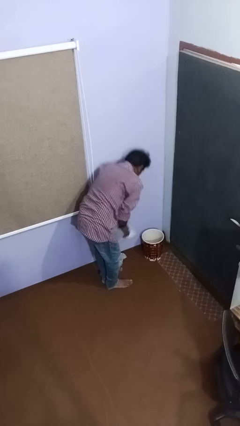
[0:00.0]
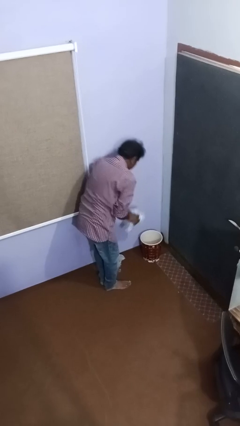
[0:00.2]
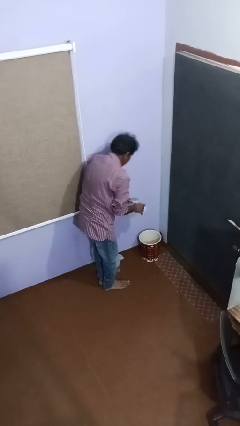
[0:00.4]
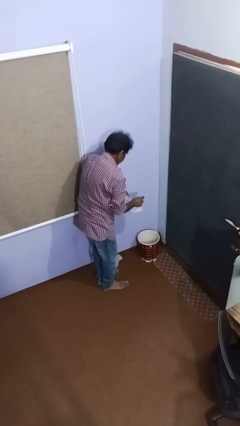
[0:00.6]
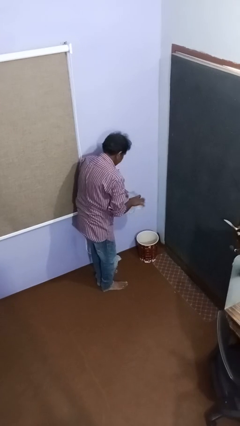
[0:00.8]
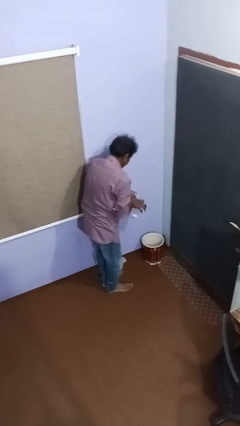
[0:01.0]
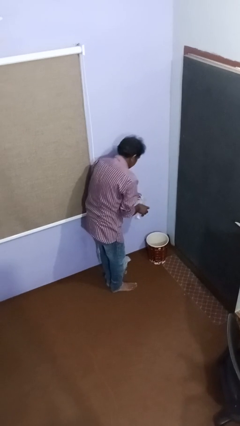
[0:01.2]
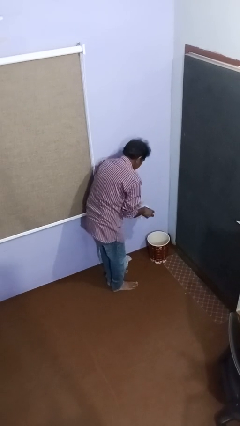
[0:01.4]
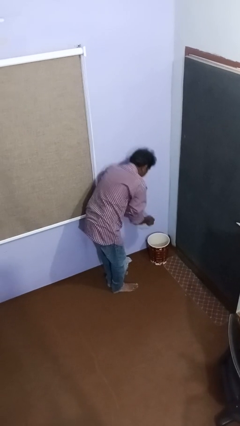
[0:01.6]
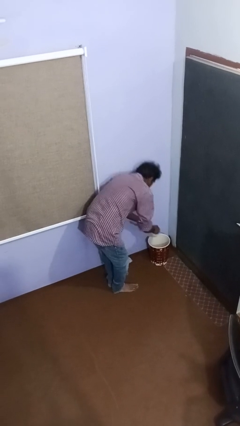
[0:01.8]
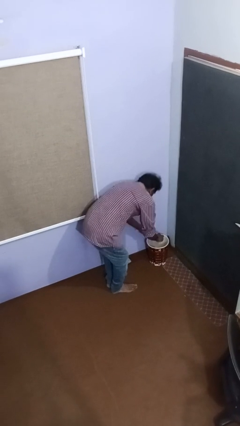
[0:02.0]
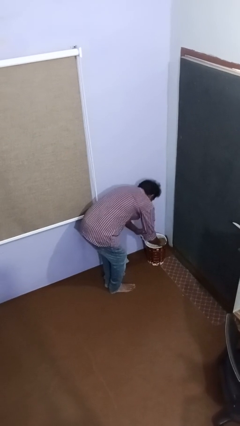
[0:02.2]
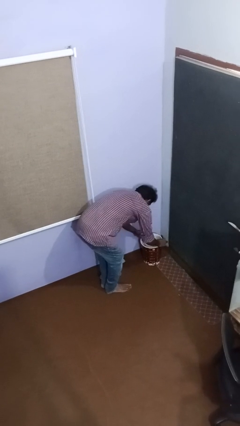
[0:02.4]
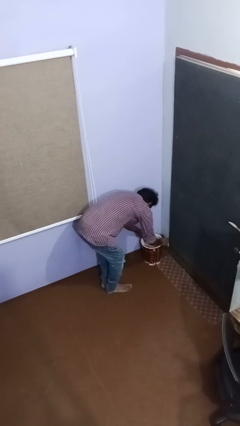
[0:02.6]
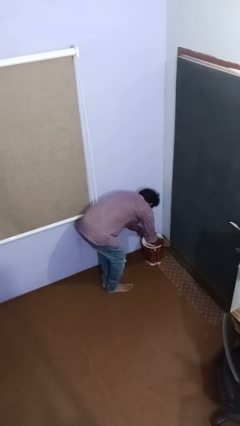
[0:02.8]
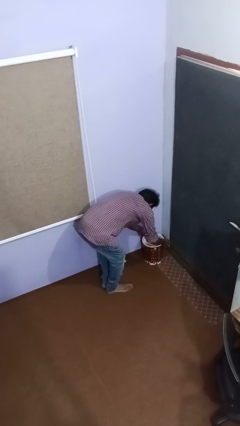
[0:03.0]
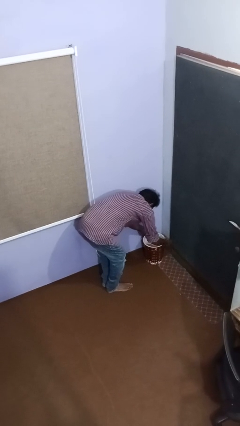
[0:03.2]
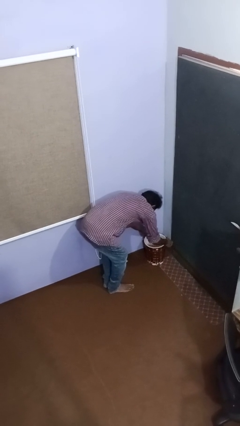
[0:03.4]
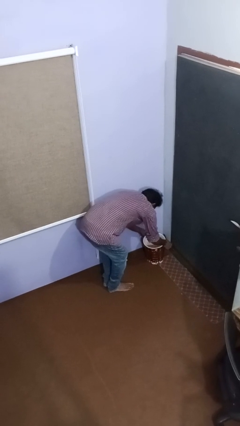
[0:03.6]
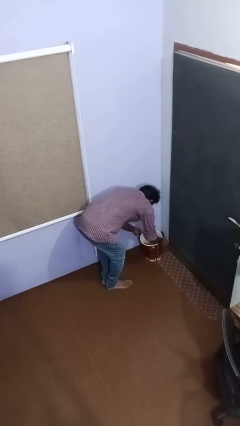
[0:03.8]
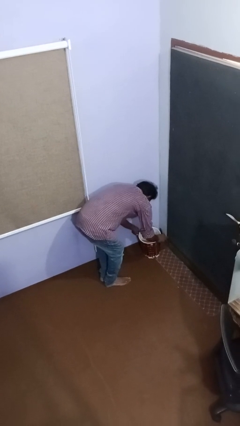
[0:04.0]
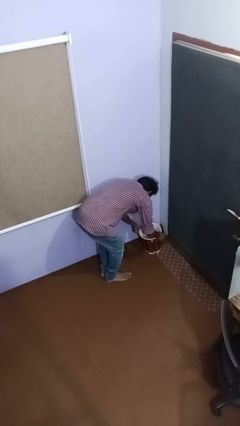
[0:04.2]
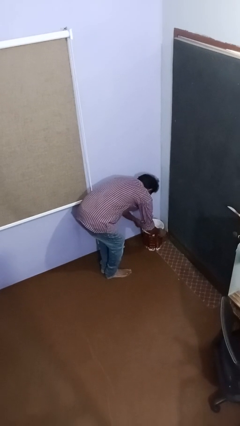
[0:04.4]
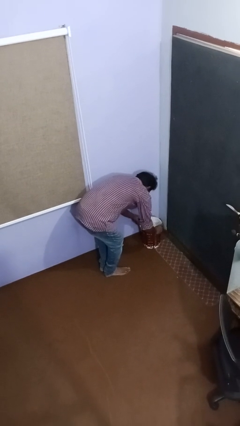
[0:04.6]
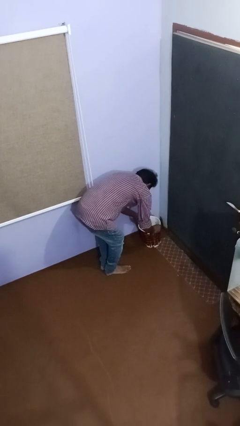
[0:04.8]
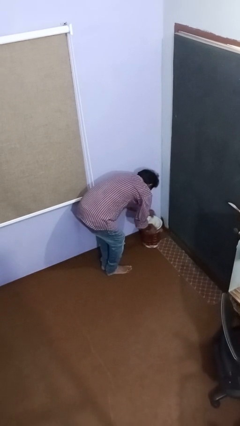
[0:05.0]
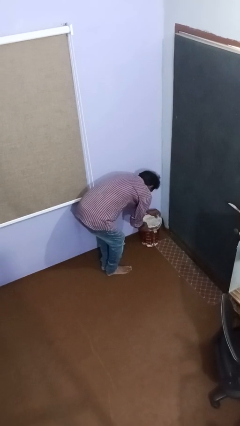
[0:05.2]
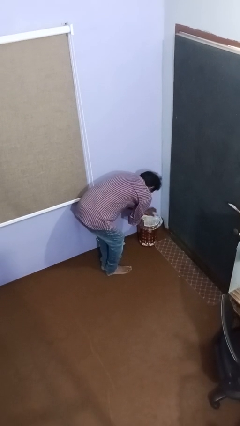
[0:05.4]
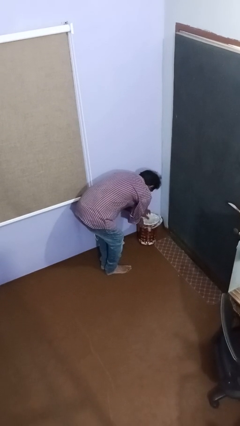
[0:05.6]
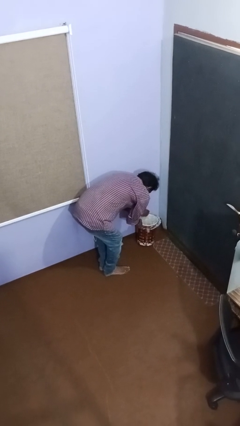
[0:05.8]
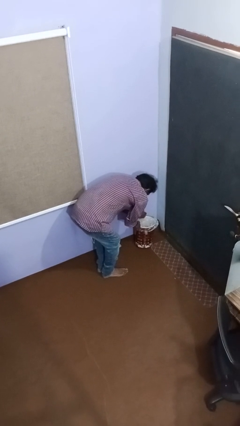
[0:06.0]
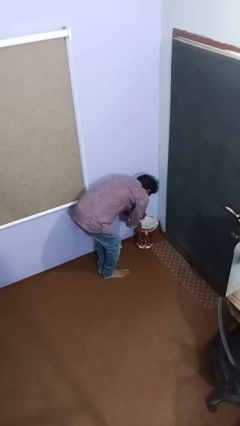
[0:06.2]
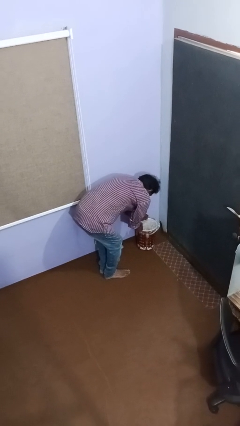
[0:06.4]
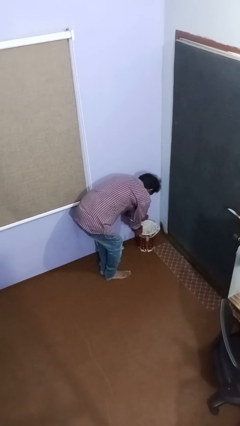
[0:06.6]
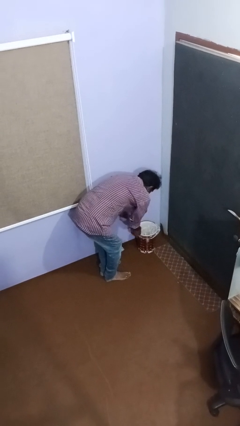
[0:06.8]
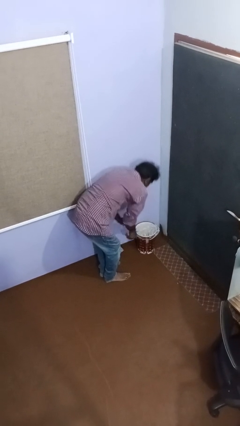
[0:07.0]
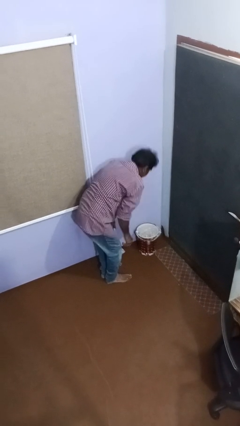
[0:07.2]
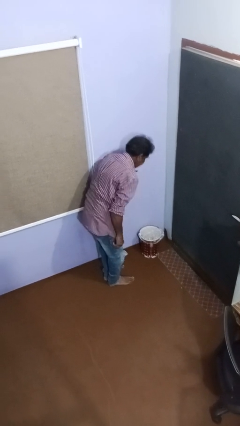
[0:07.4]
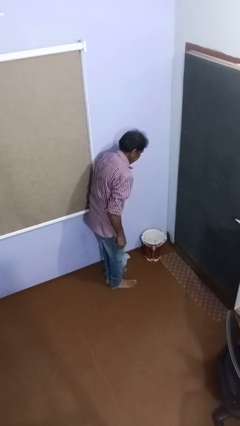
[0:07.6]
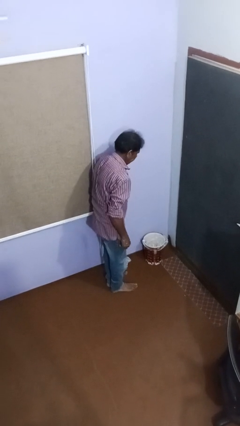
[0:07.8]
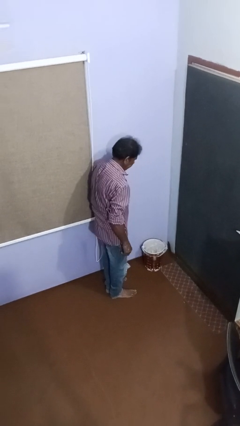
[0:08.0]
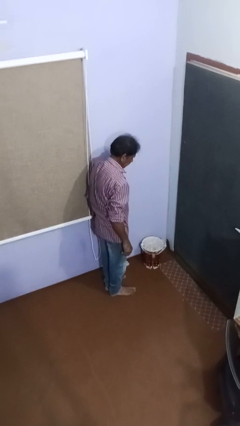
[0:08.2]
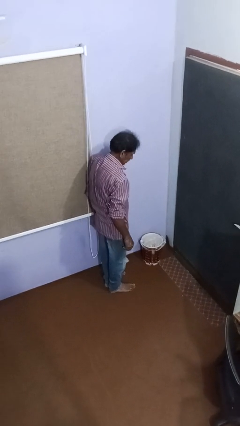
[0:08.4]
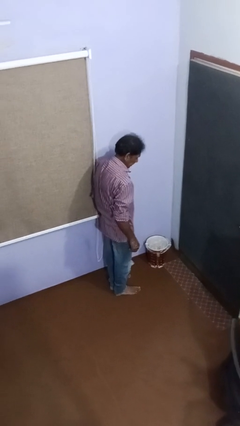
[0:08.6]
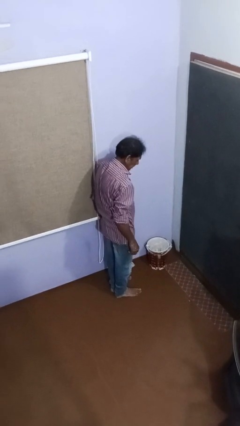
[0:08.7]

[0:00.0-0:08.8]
person inserts trashbag into trashcan

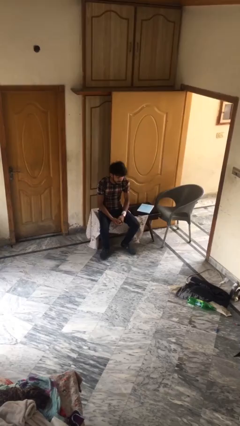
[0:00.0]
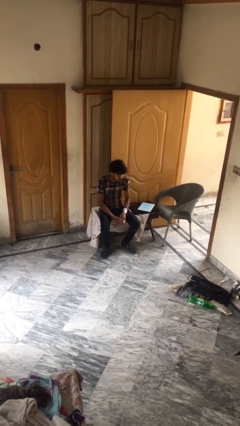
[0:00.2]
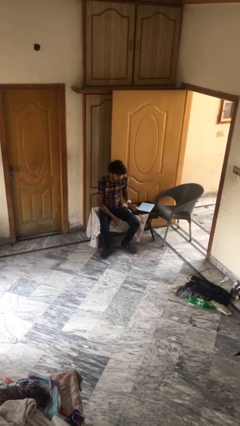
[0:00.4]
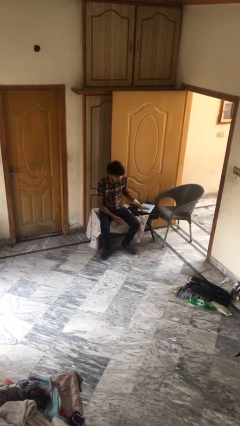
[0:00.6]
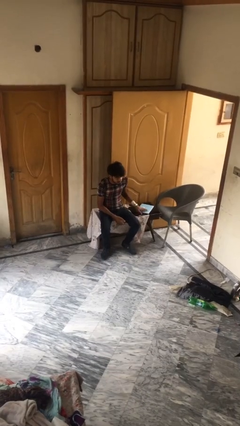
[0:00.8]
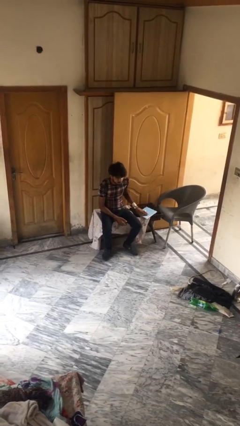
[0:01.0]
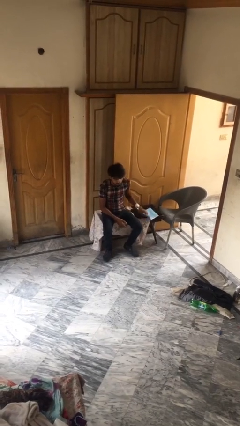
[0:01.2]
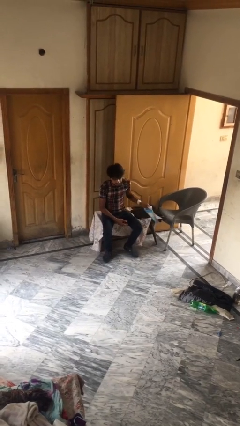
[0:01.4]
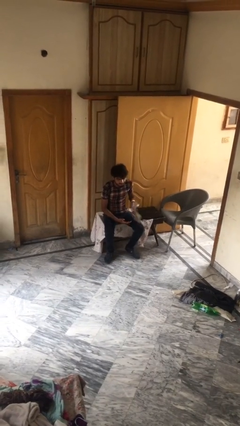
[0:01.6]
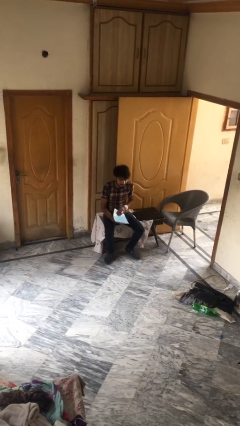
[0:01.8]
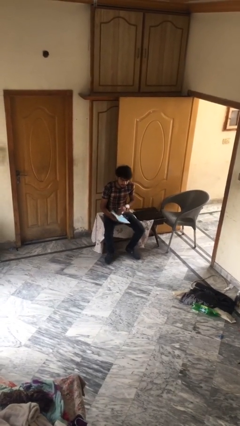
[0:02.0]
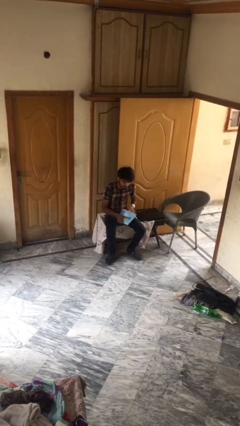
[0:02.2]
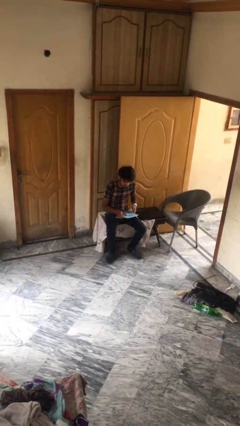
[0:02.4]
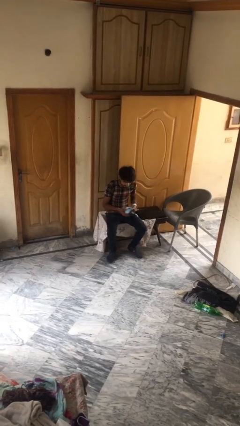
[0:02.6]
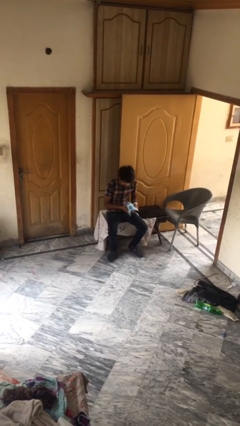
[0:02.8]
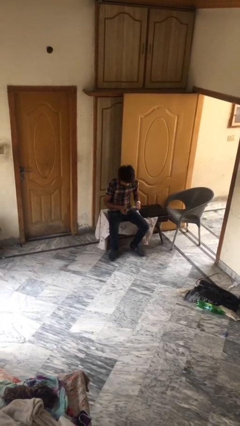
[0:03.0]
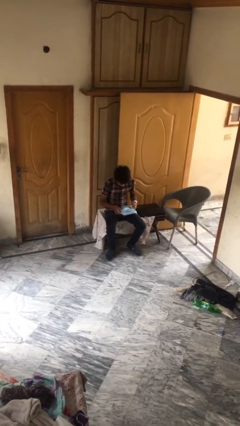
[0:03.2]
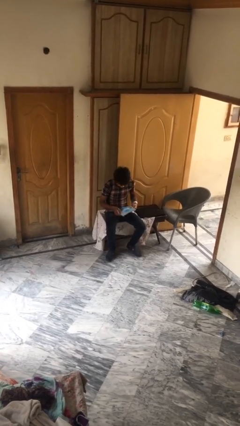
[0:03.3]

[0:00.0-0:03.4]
person picks up object from table

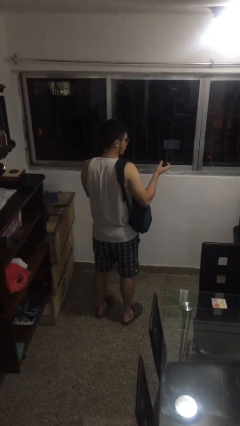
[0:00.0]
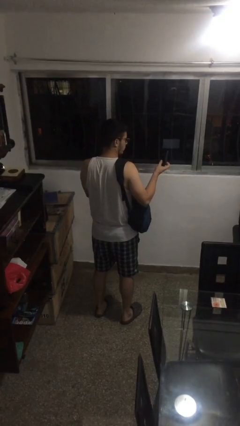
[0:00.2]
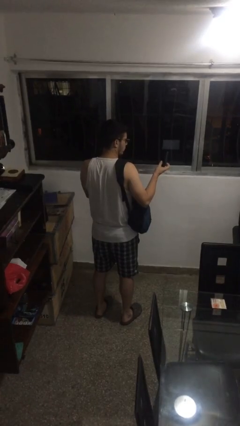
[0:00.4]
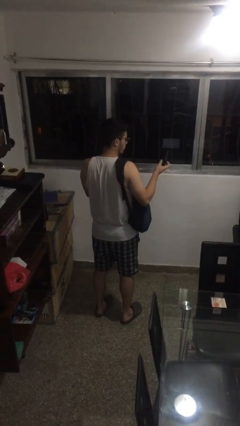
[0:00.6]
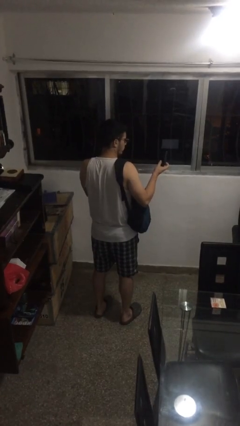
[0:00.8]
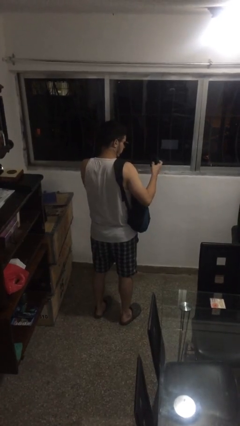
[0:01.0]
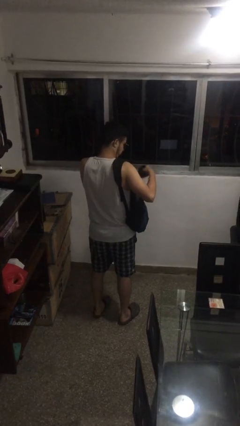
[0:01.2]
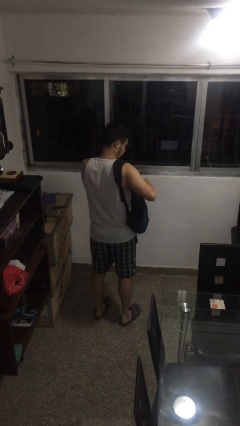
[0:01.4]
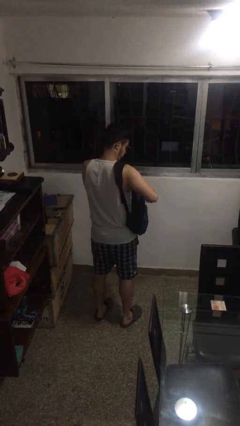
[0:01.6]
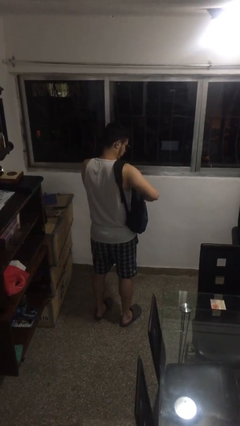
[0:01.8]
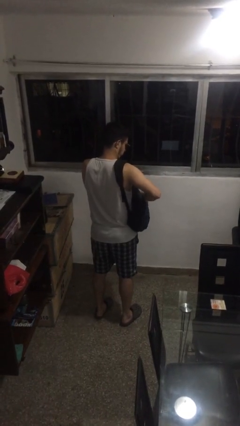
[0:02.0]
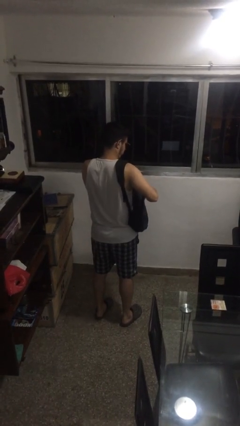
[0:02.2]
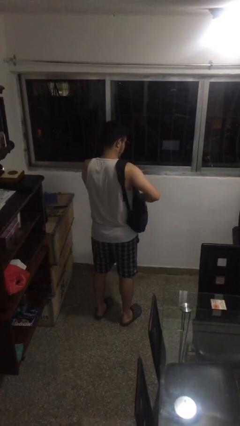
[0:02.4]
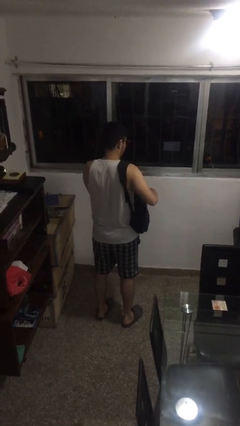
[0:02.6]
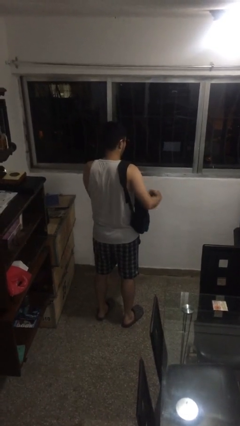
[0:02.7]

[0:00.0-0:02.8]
person puts object into backpack

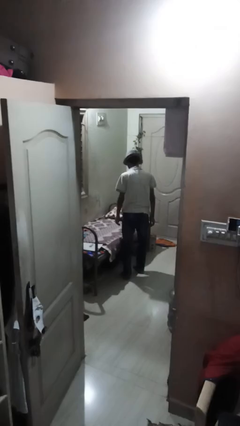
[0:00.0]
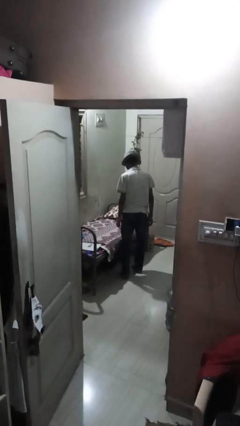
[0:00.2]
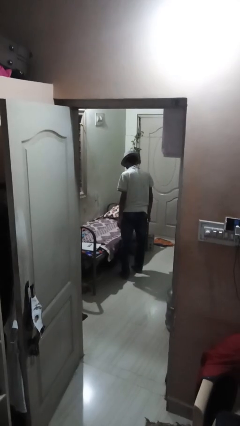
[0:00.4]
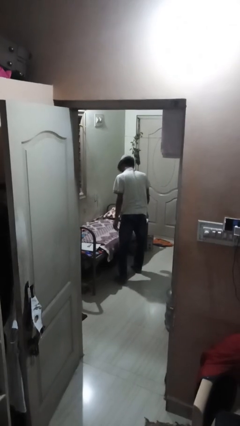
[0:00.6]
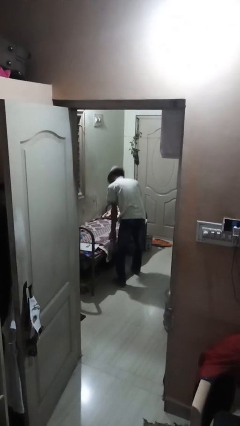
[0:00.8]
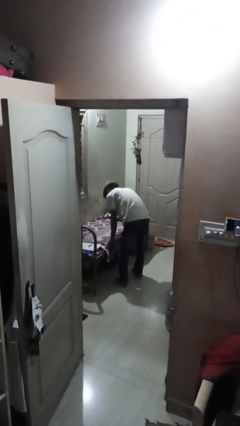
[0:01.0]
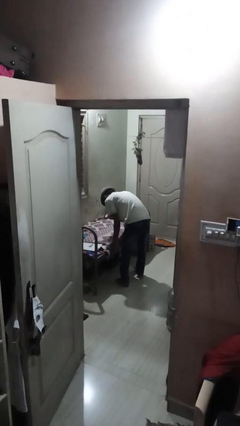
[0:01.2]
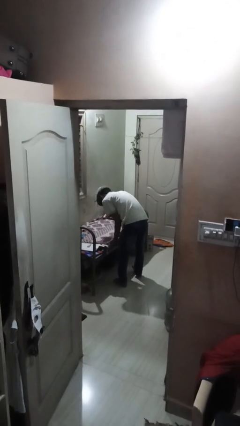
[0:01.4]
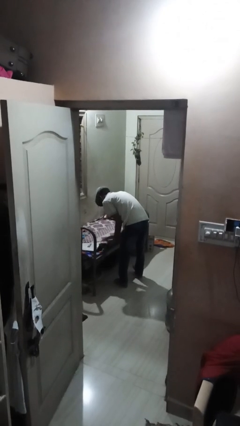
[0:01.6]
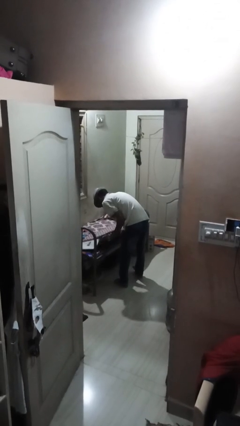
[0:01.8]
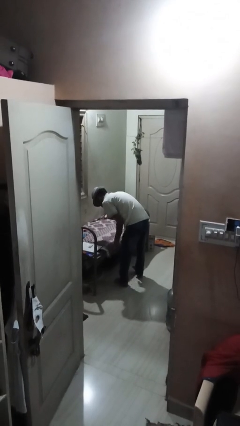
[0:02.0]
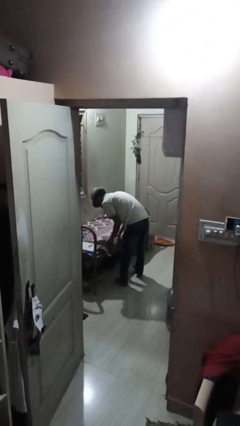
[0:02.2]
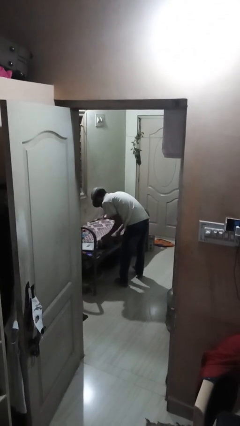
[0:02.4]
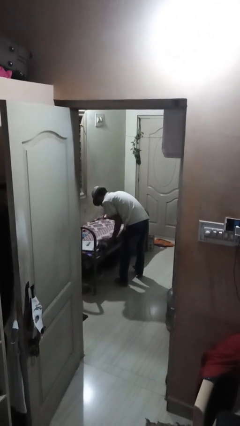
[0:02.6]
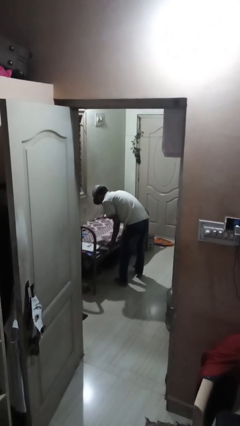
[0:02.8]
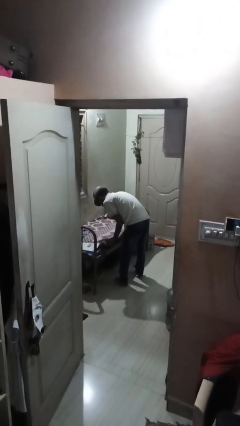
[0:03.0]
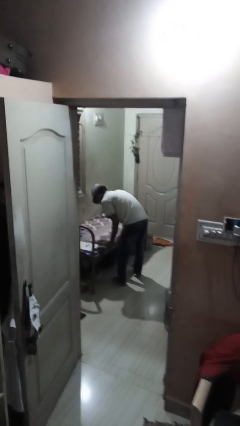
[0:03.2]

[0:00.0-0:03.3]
person makes bed
